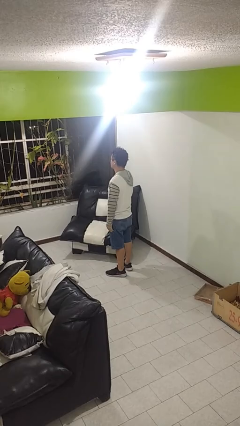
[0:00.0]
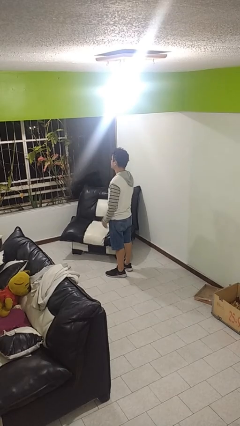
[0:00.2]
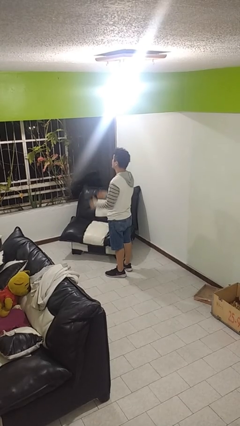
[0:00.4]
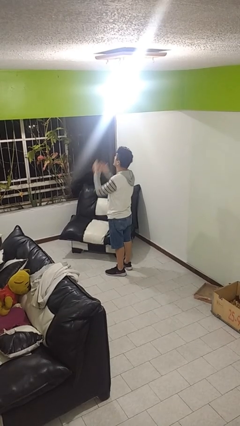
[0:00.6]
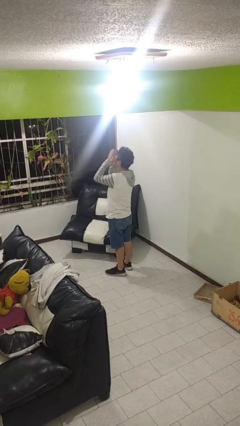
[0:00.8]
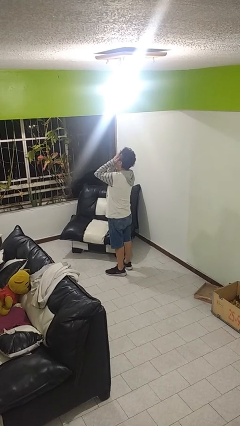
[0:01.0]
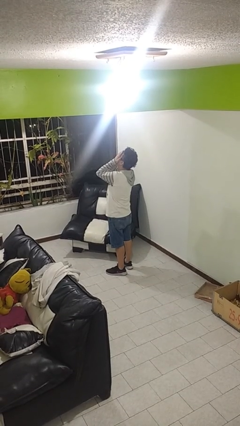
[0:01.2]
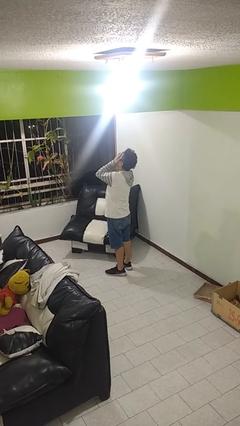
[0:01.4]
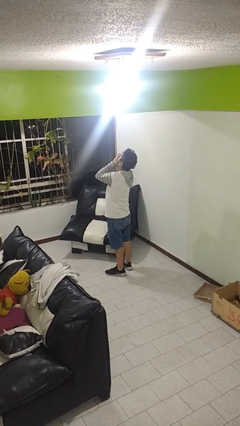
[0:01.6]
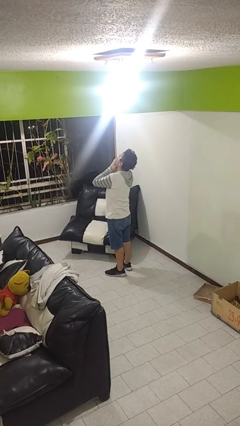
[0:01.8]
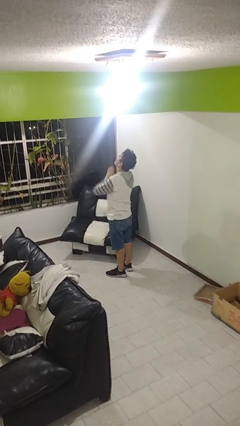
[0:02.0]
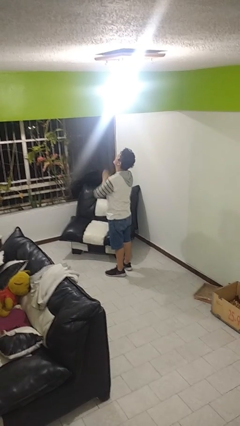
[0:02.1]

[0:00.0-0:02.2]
person covers face with hands

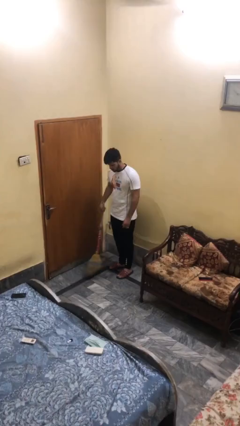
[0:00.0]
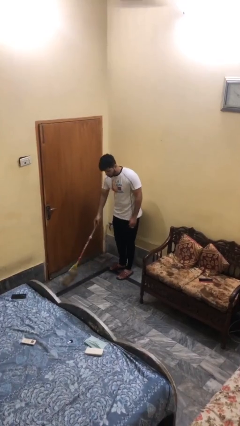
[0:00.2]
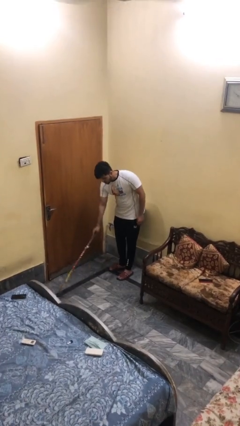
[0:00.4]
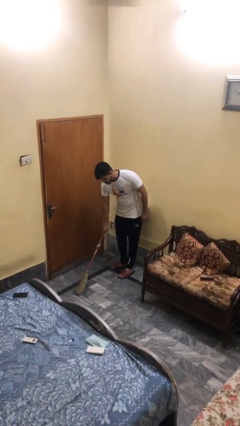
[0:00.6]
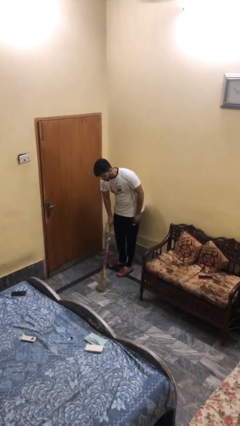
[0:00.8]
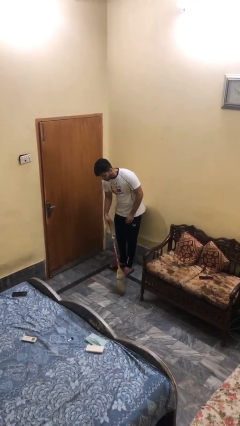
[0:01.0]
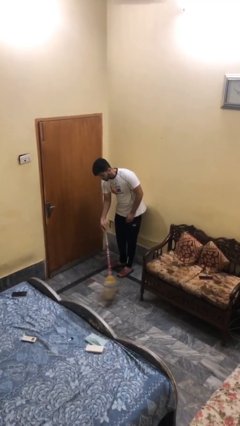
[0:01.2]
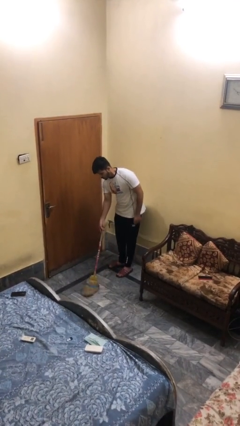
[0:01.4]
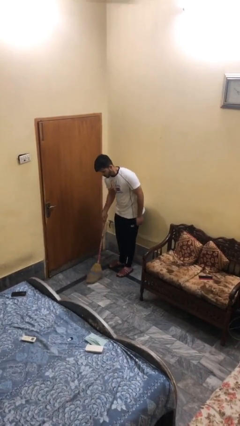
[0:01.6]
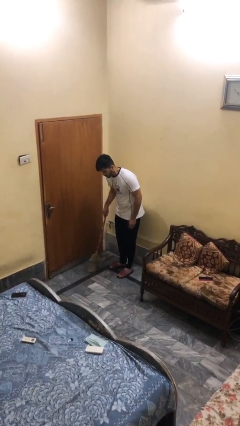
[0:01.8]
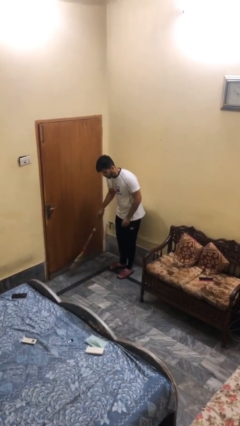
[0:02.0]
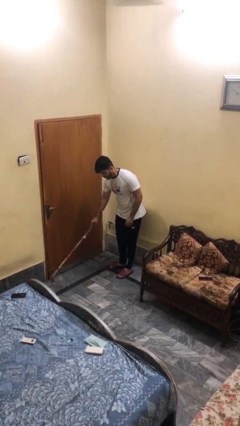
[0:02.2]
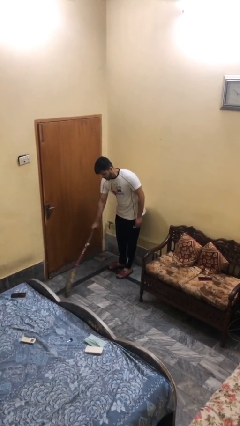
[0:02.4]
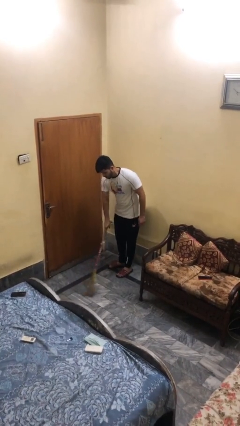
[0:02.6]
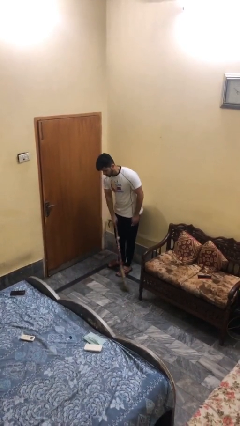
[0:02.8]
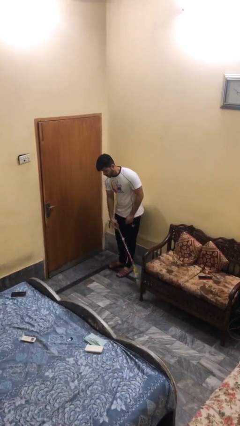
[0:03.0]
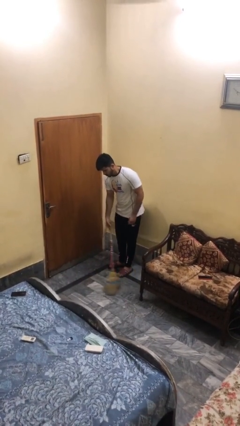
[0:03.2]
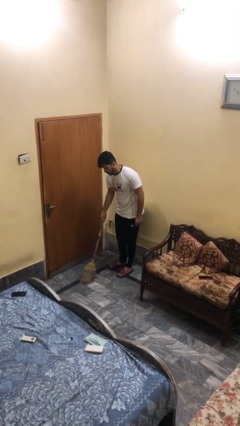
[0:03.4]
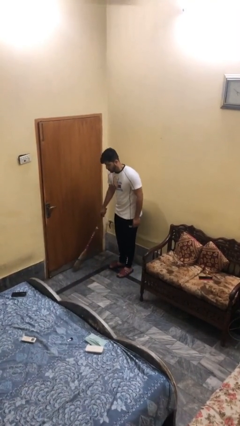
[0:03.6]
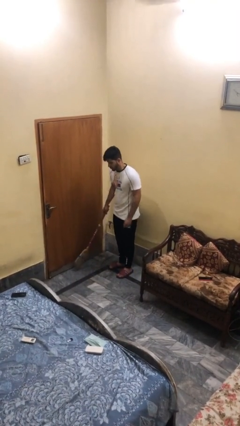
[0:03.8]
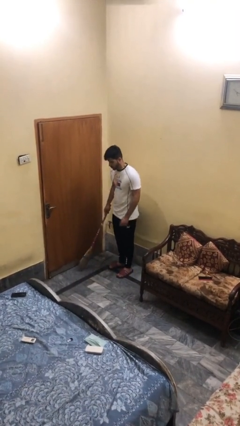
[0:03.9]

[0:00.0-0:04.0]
person sweeps floor

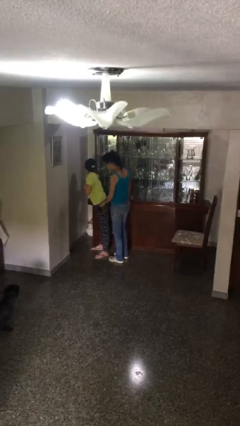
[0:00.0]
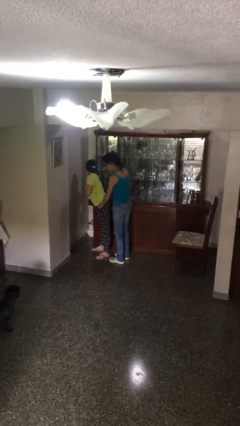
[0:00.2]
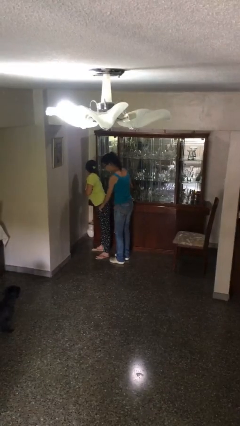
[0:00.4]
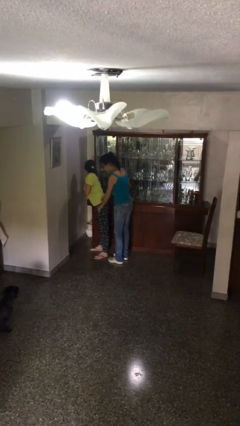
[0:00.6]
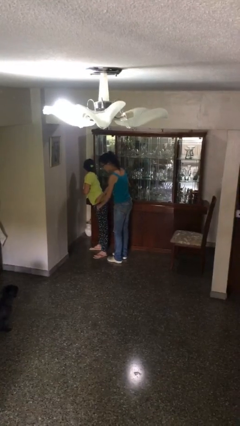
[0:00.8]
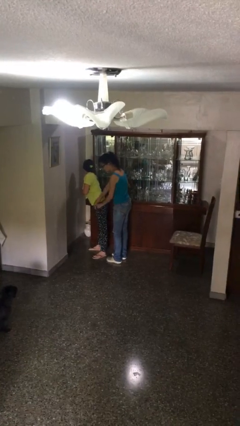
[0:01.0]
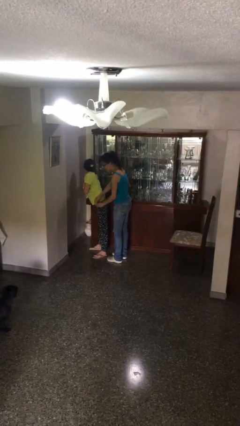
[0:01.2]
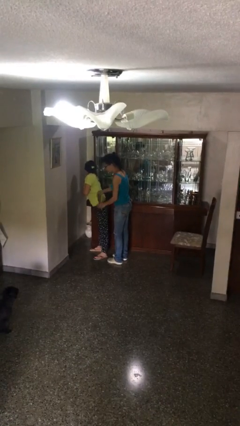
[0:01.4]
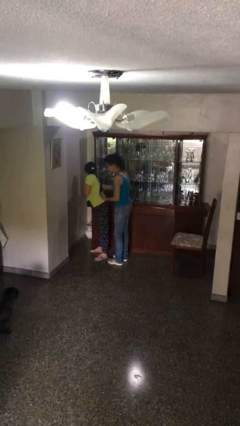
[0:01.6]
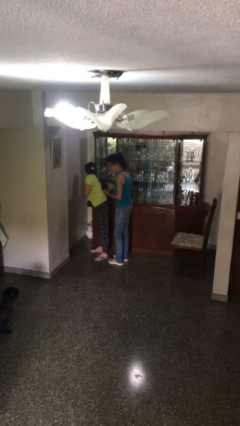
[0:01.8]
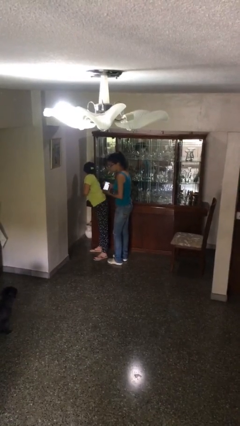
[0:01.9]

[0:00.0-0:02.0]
person steals object from person

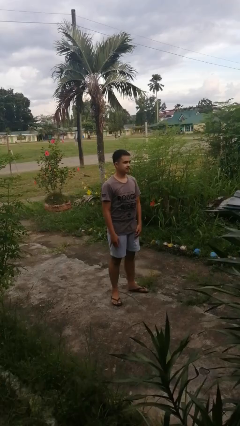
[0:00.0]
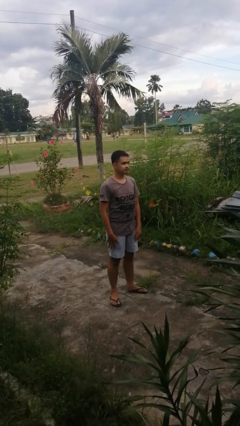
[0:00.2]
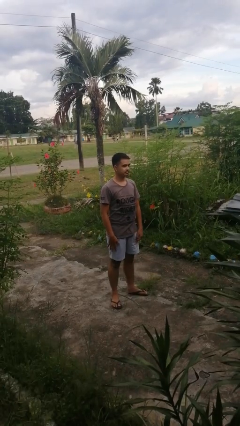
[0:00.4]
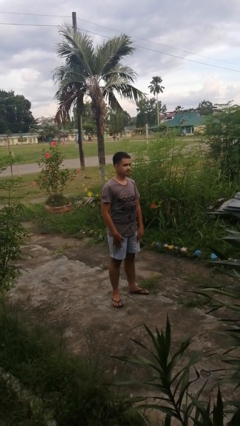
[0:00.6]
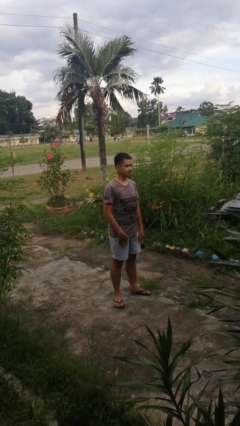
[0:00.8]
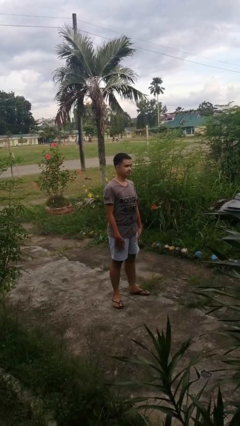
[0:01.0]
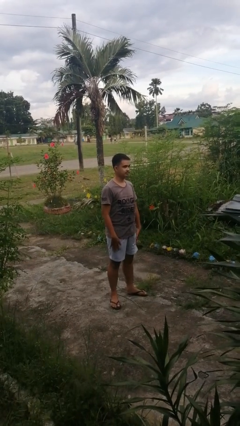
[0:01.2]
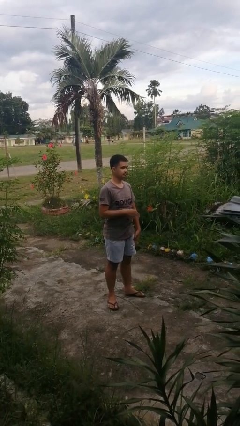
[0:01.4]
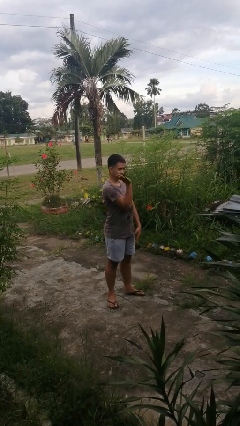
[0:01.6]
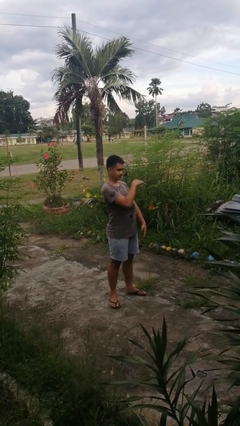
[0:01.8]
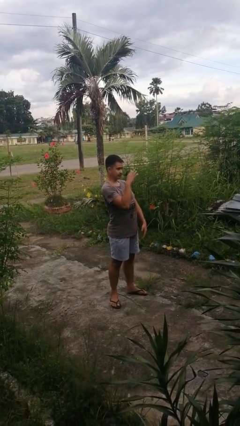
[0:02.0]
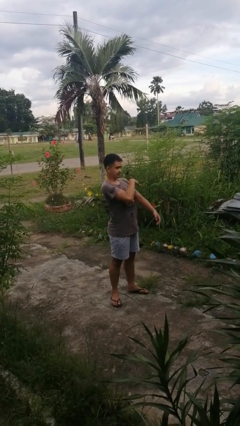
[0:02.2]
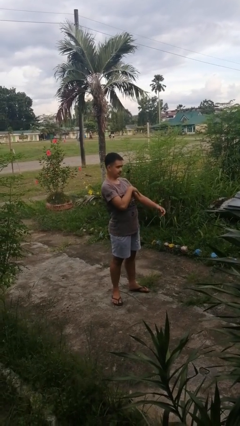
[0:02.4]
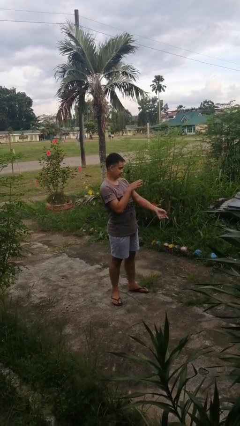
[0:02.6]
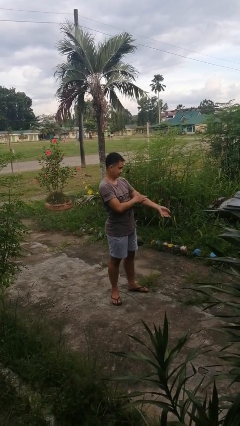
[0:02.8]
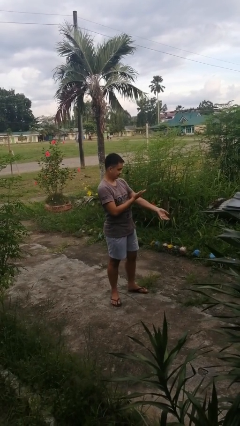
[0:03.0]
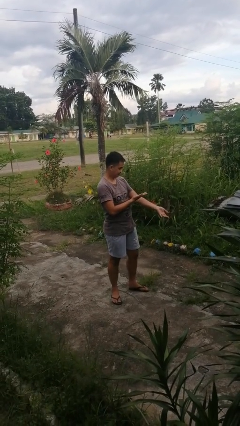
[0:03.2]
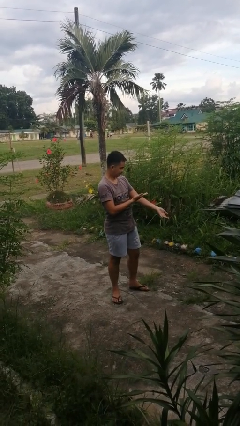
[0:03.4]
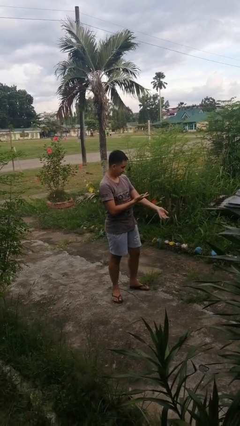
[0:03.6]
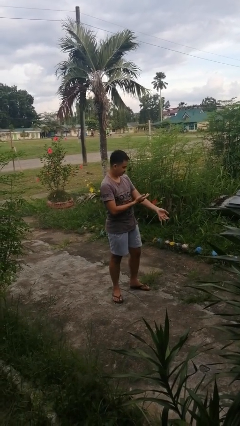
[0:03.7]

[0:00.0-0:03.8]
person swats bug

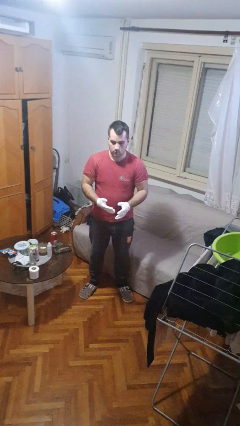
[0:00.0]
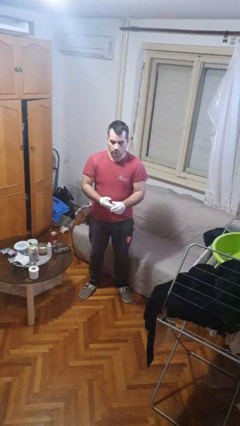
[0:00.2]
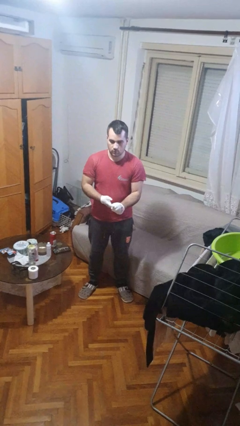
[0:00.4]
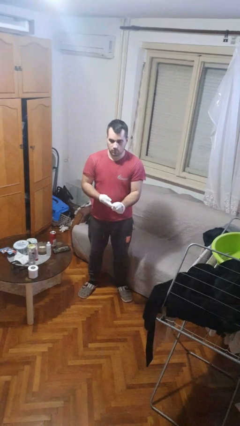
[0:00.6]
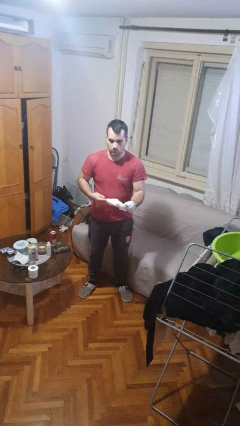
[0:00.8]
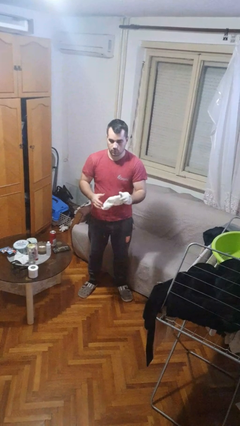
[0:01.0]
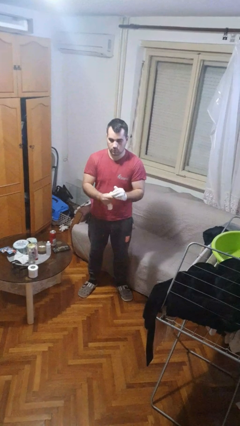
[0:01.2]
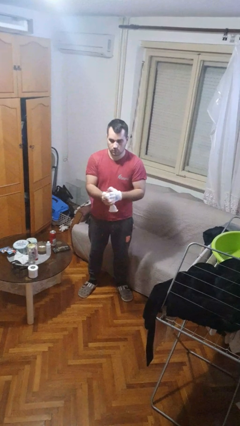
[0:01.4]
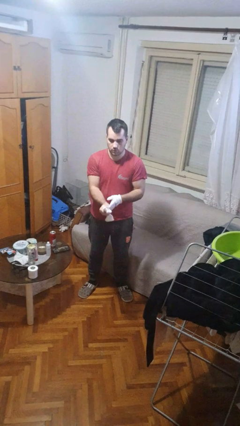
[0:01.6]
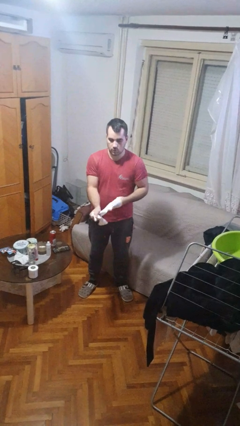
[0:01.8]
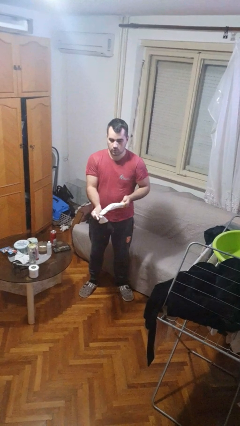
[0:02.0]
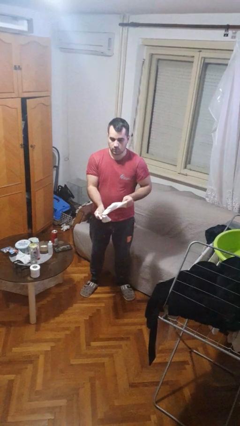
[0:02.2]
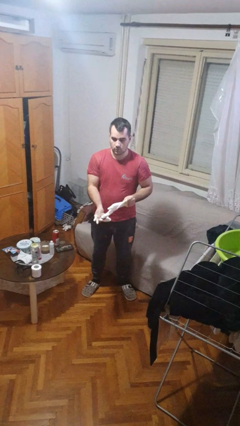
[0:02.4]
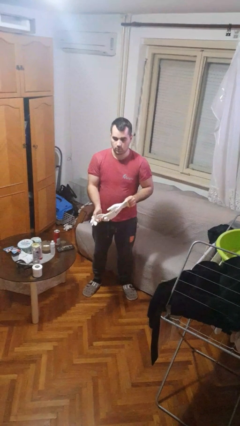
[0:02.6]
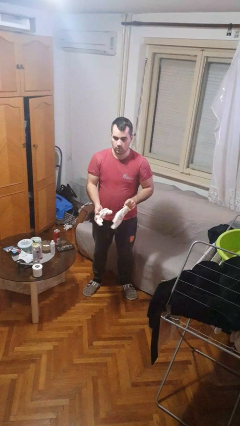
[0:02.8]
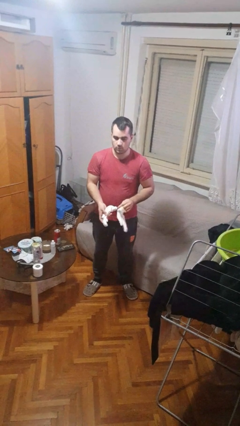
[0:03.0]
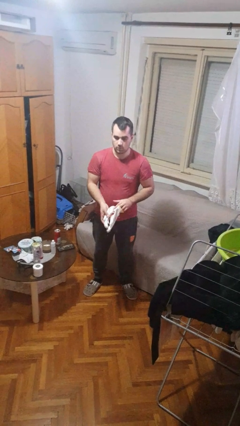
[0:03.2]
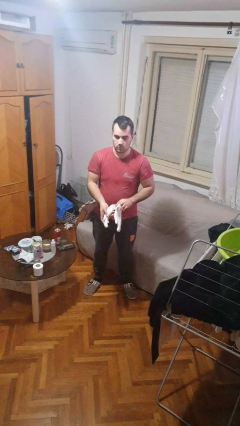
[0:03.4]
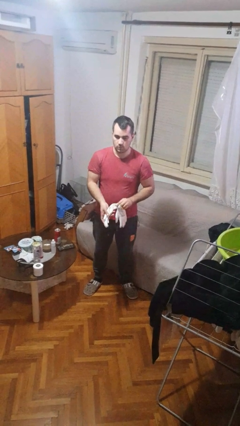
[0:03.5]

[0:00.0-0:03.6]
person takes off gloves

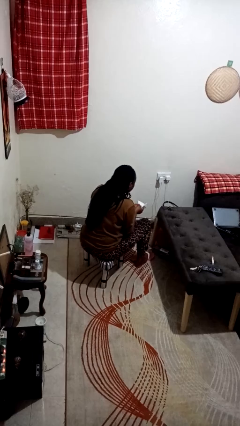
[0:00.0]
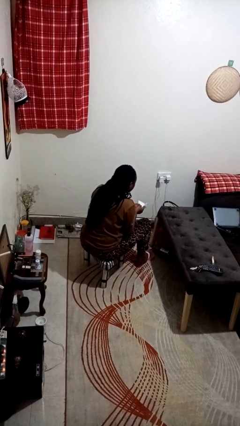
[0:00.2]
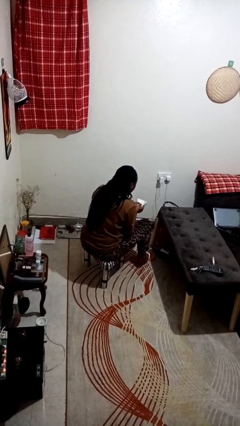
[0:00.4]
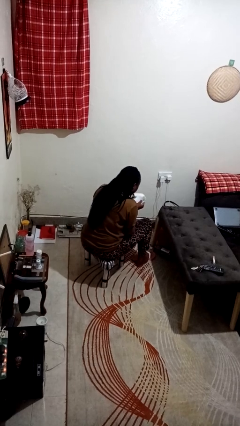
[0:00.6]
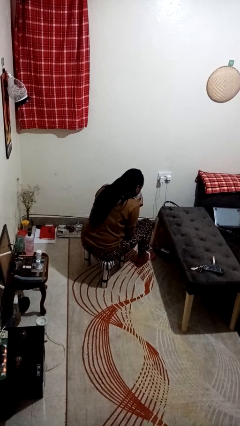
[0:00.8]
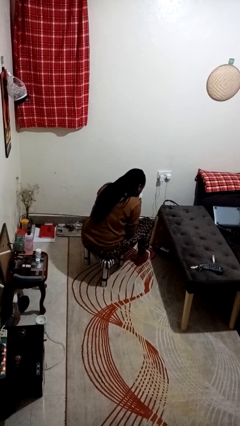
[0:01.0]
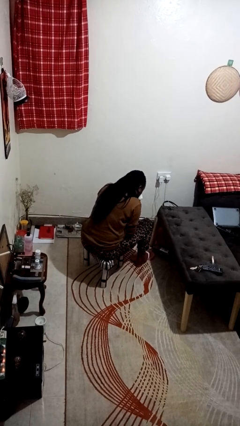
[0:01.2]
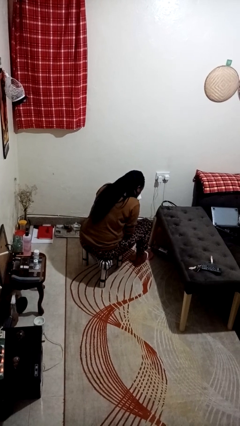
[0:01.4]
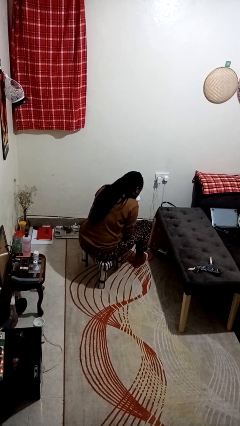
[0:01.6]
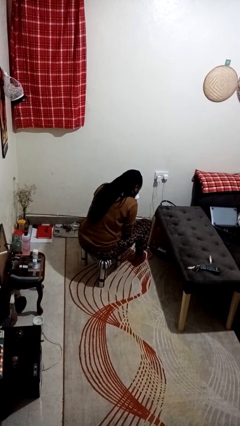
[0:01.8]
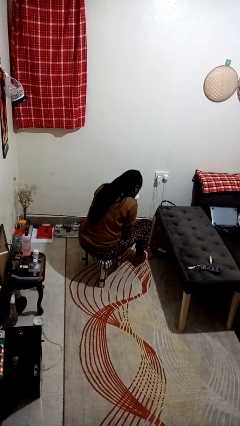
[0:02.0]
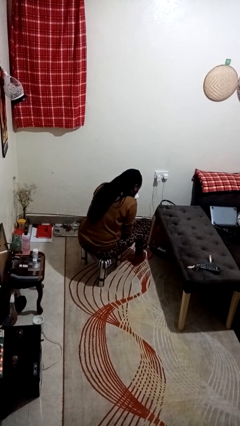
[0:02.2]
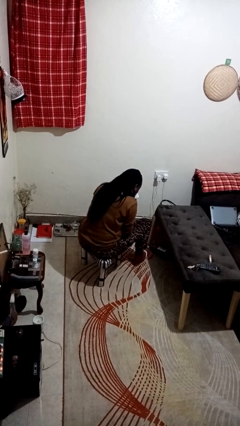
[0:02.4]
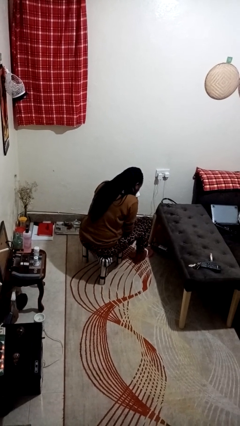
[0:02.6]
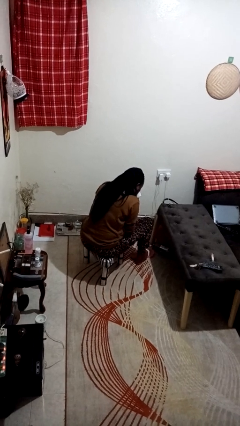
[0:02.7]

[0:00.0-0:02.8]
person blows nose
